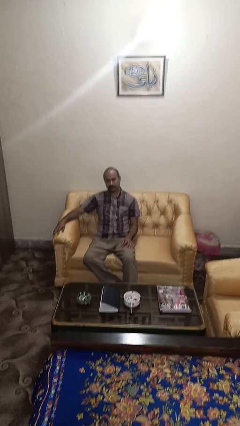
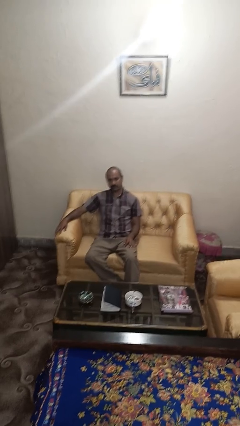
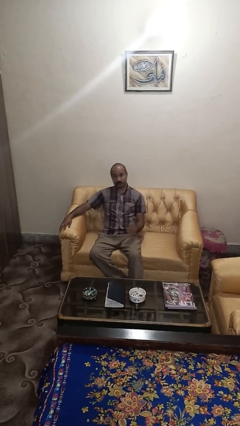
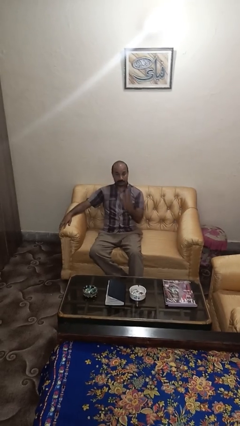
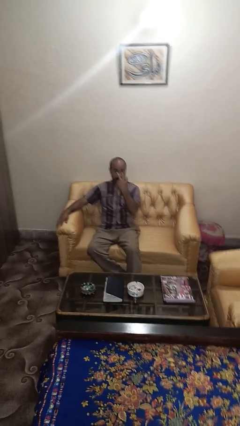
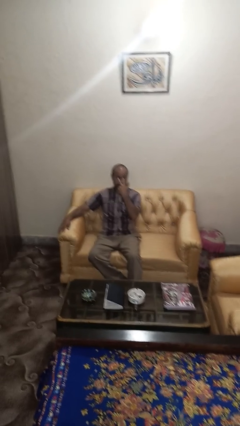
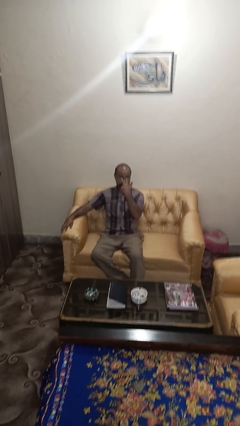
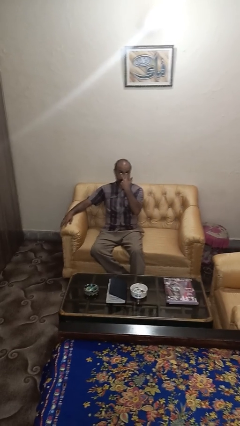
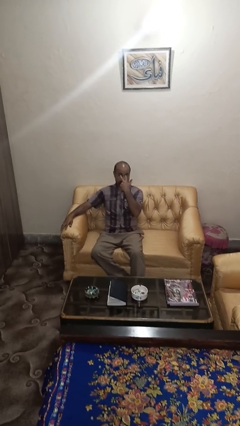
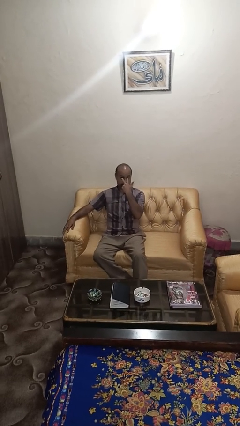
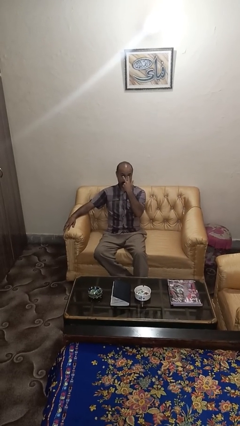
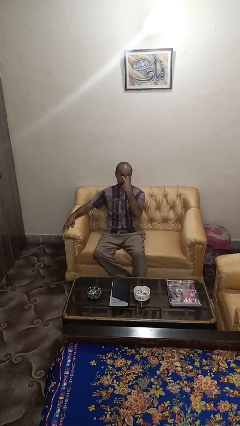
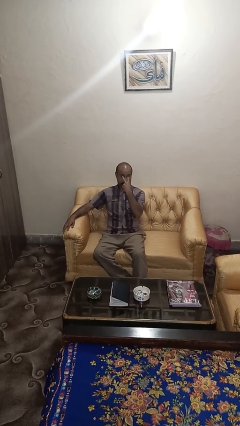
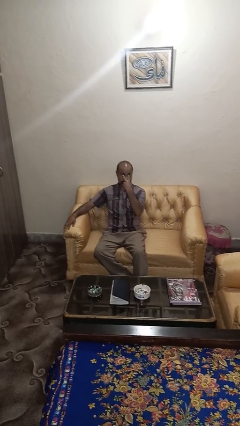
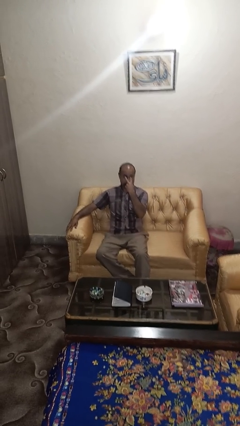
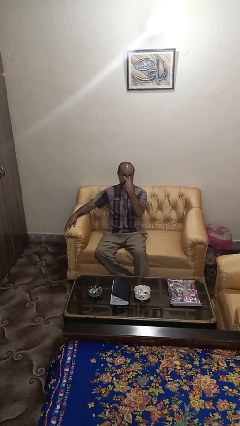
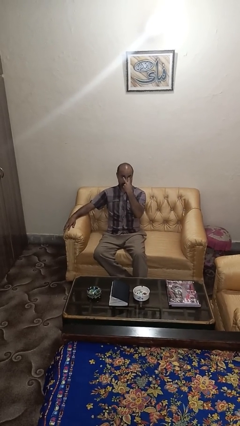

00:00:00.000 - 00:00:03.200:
person gestures watch closely

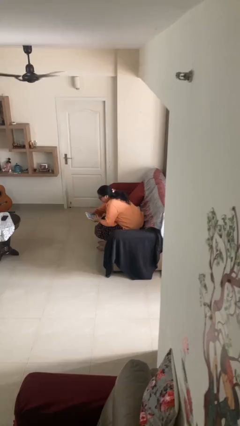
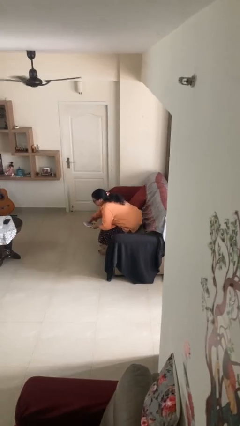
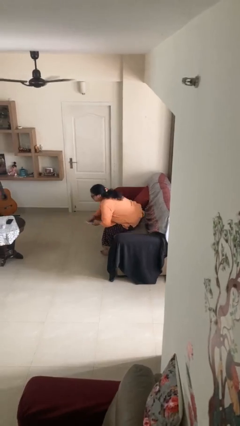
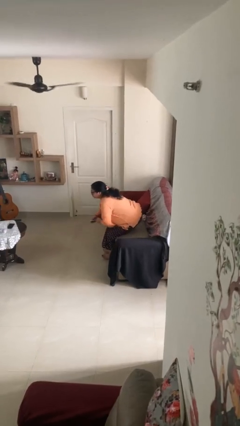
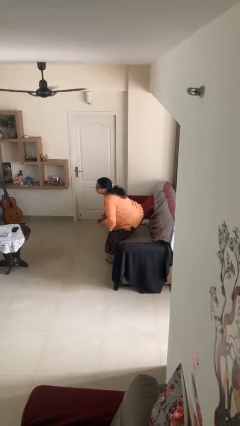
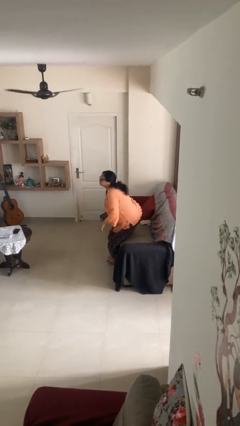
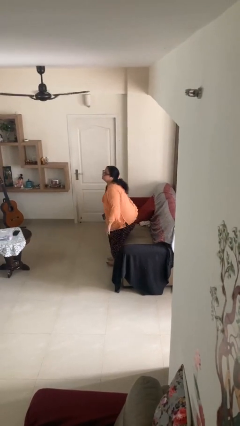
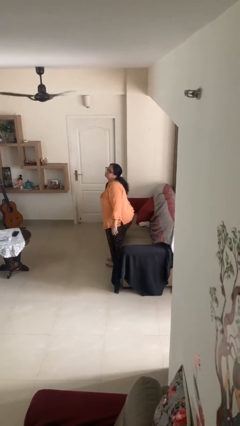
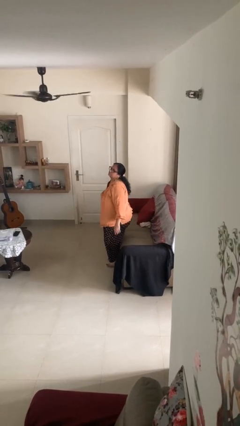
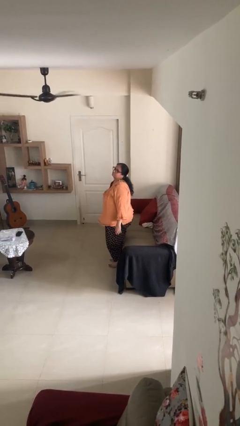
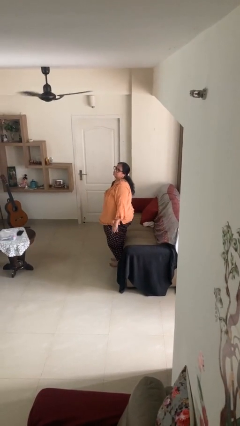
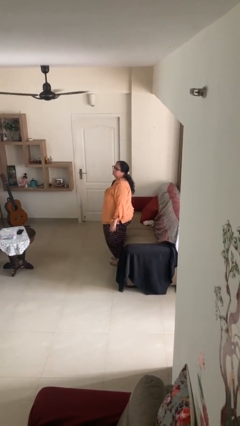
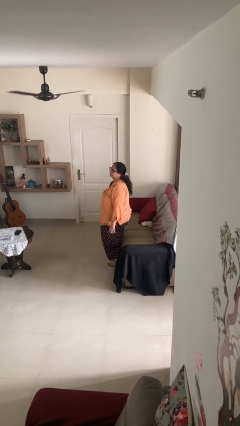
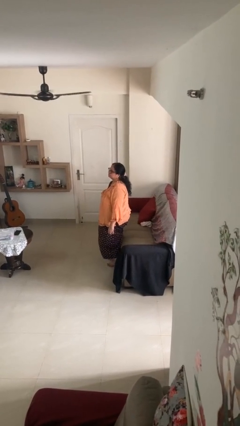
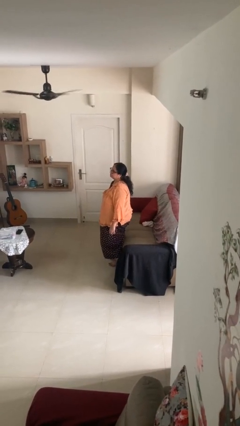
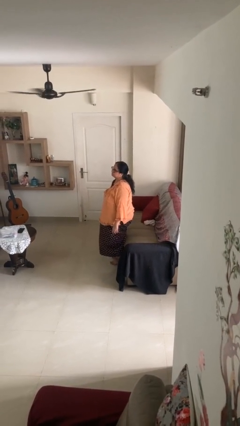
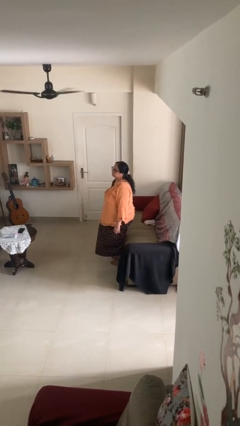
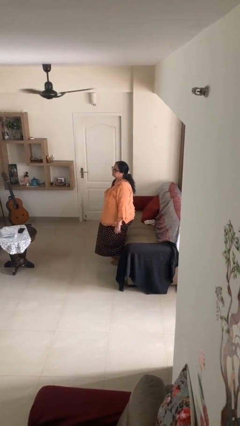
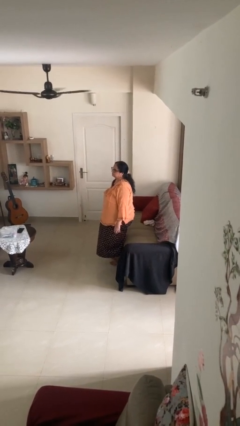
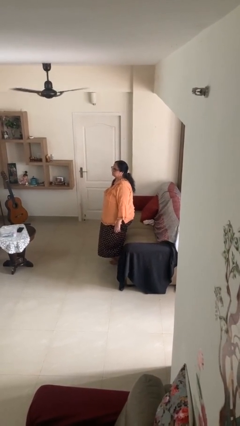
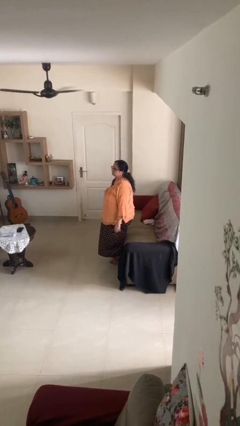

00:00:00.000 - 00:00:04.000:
person stands up

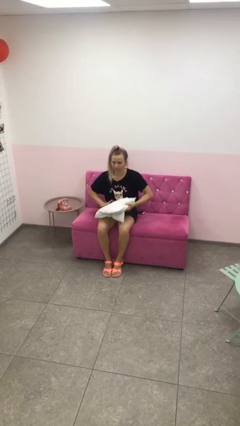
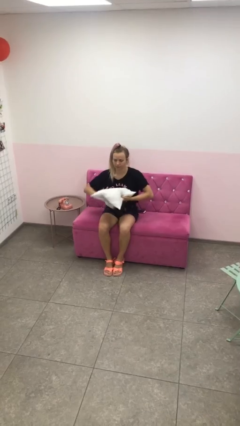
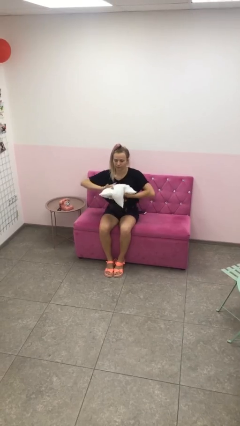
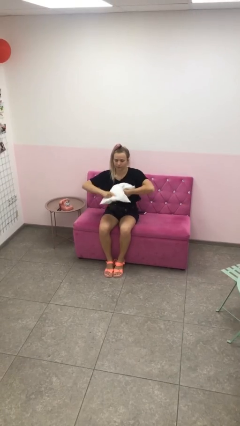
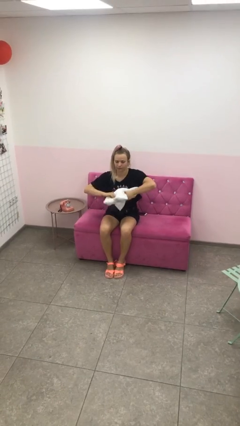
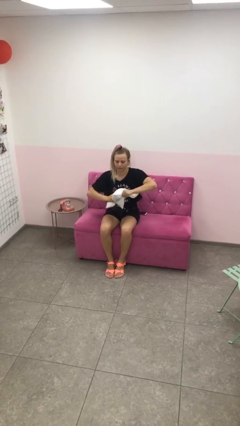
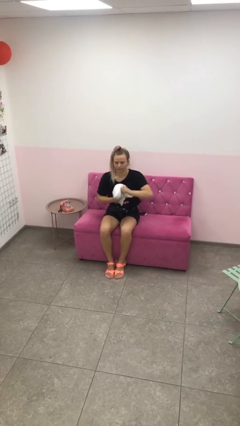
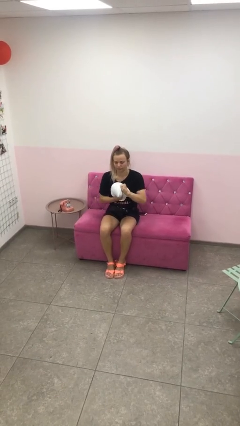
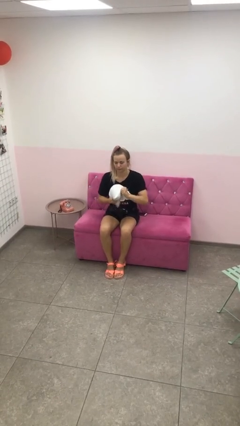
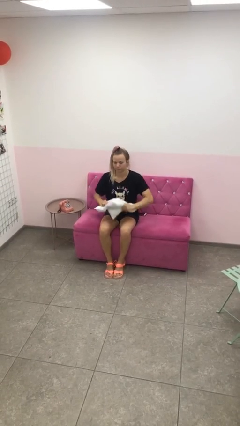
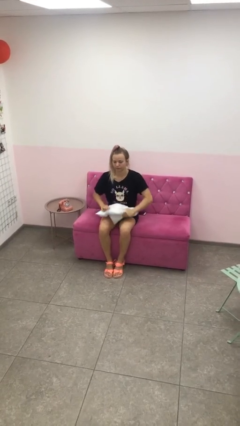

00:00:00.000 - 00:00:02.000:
person squeezes object

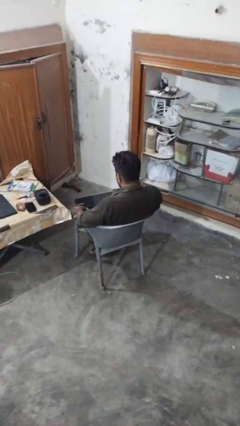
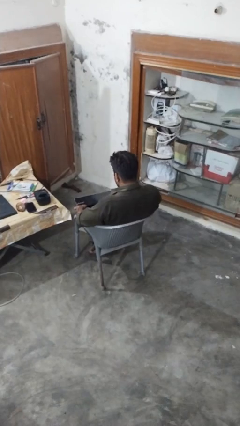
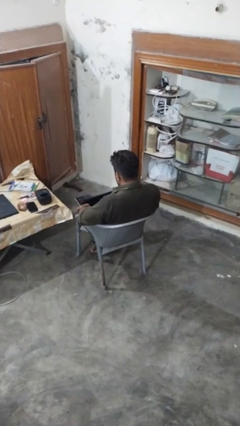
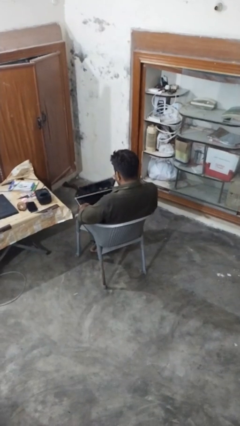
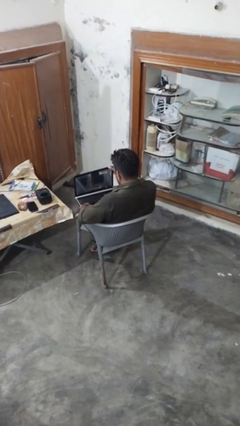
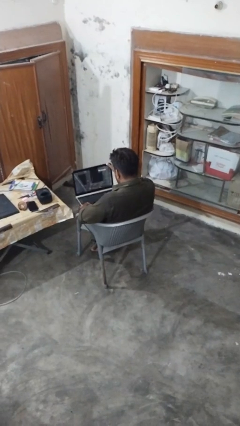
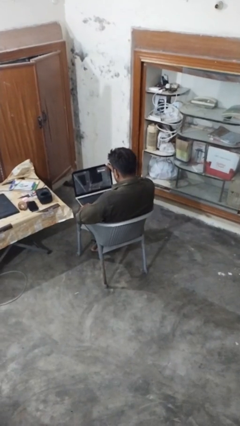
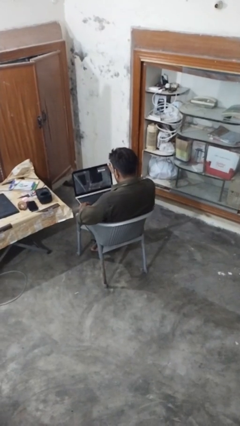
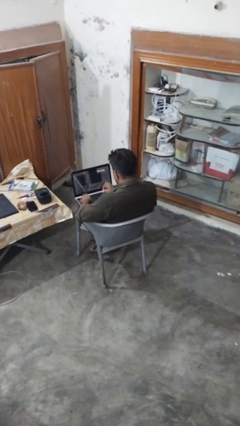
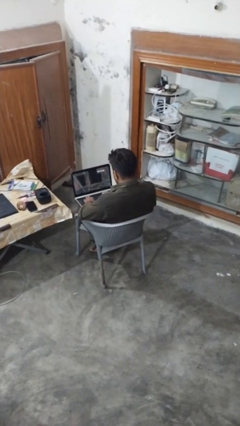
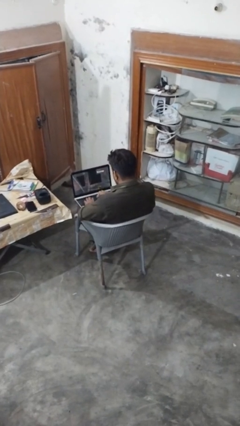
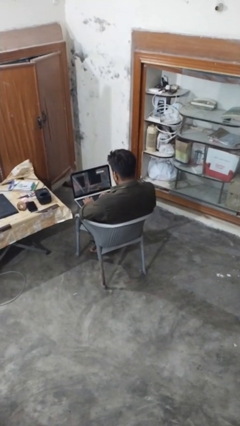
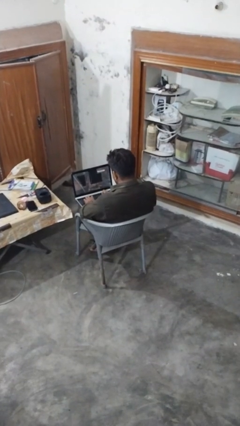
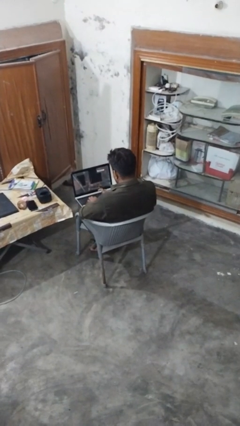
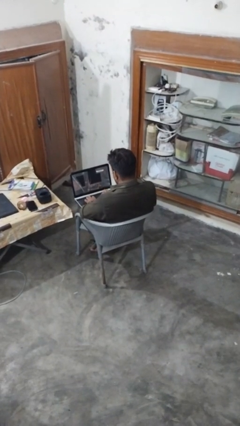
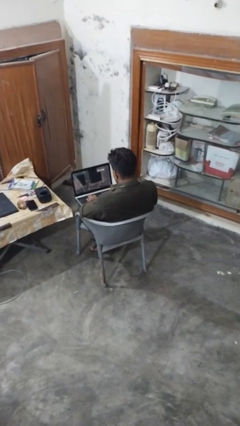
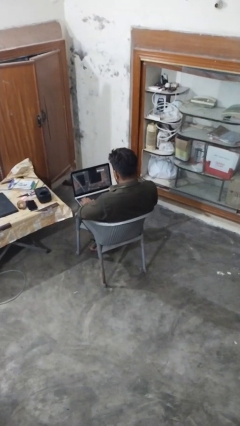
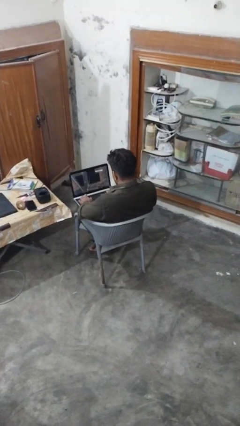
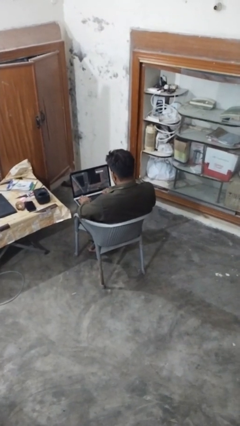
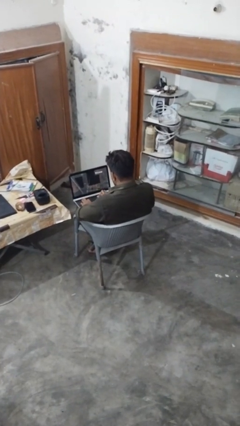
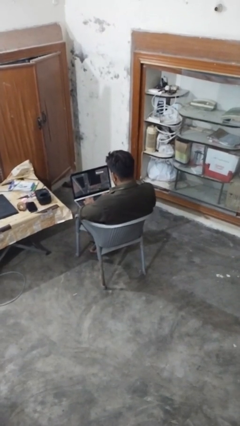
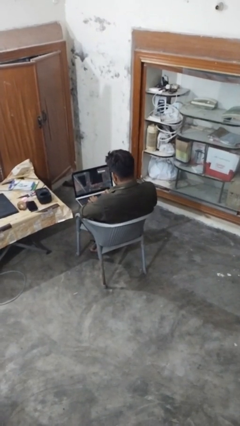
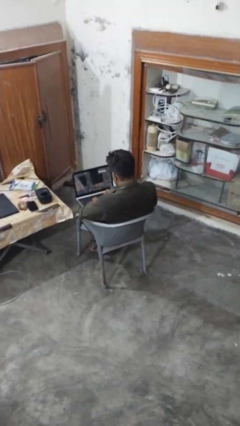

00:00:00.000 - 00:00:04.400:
person opens laptop

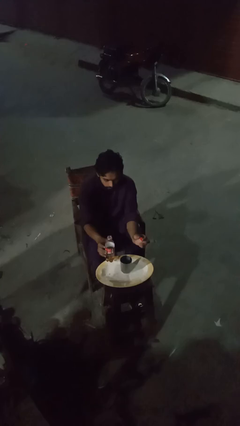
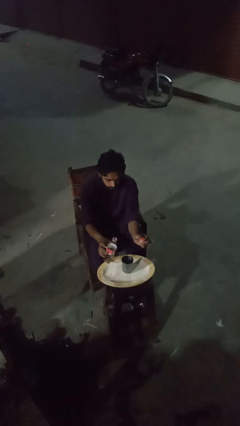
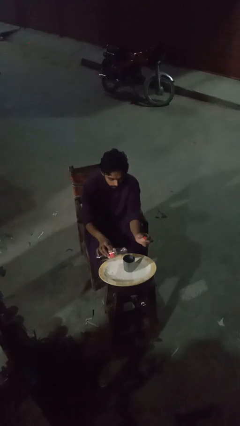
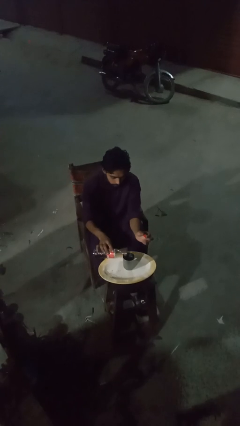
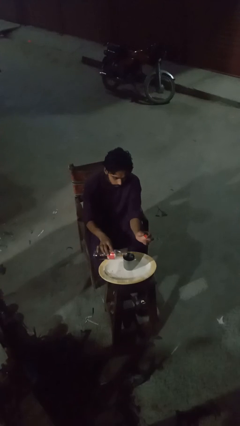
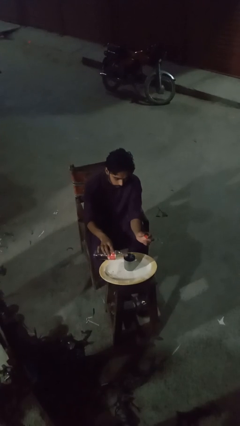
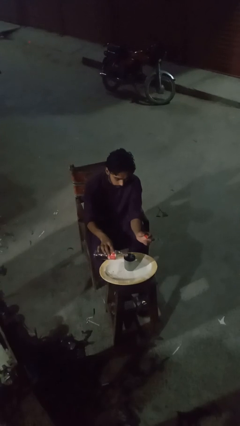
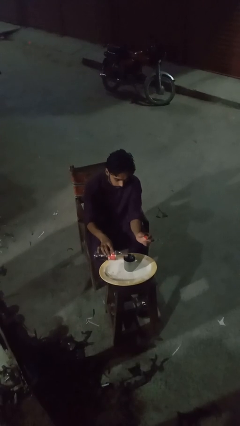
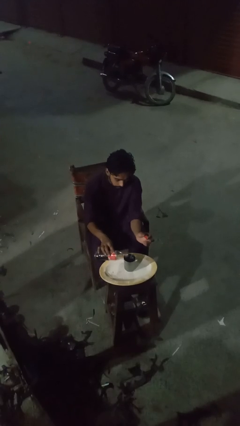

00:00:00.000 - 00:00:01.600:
person pours liquid into cup

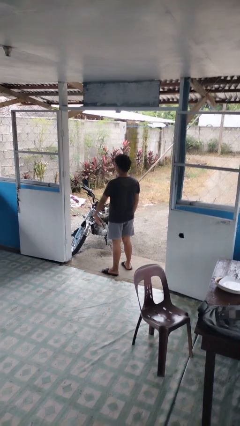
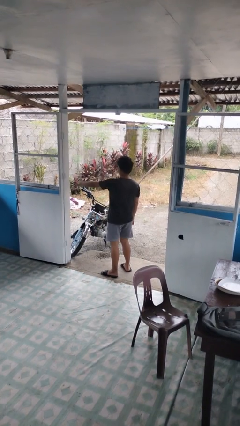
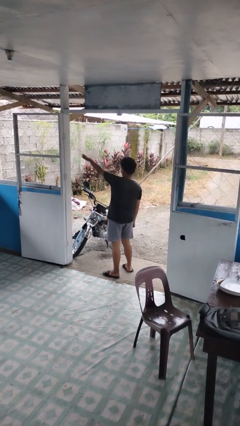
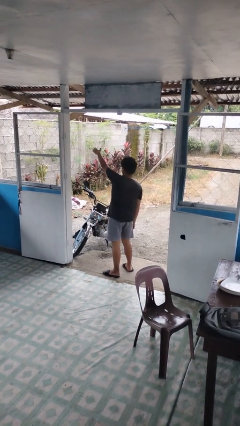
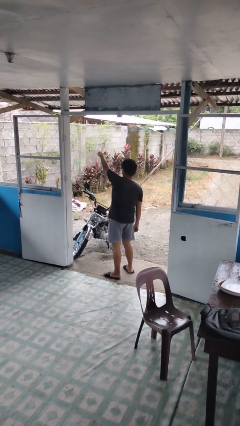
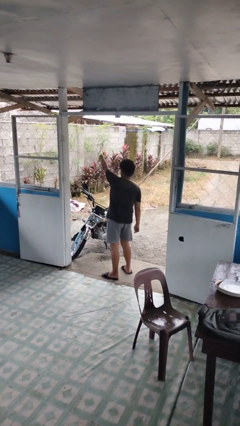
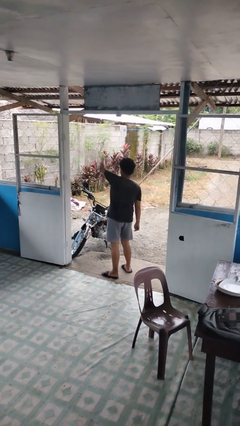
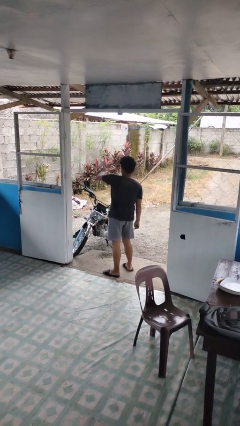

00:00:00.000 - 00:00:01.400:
person gestures come here

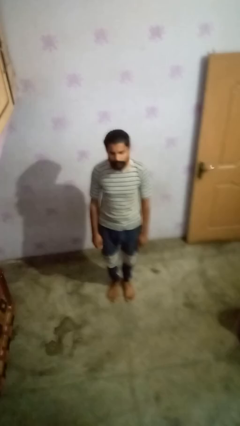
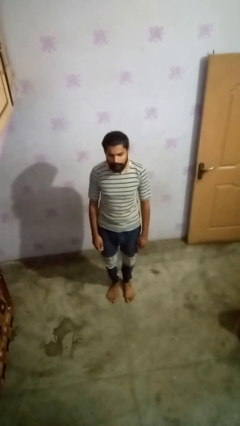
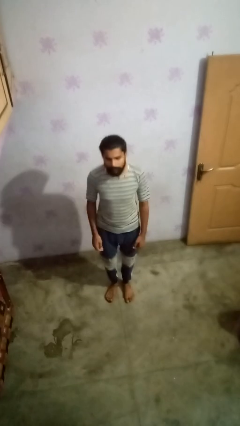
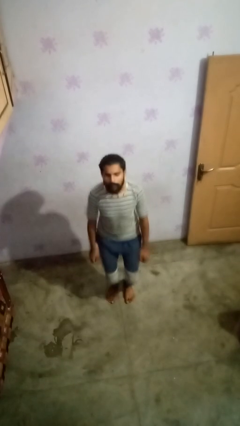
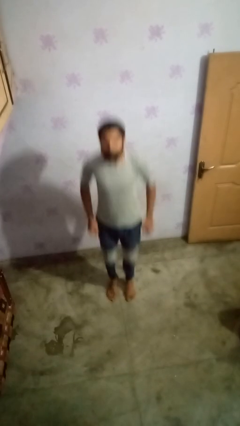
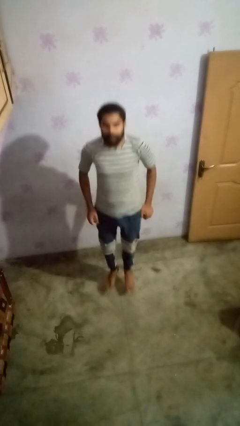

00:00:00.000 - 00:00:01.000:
person jumps
